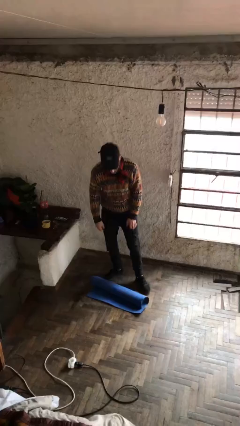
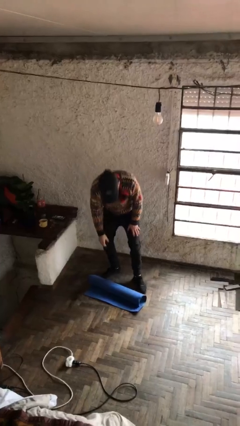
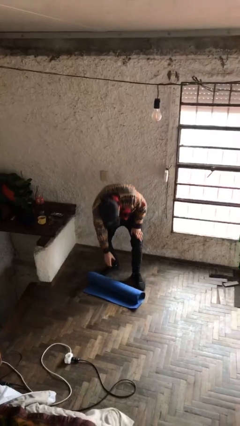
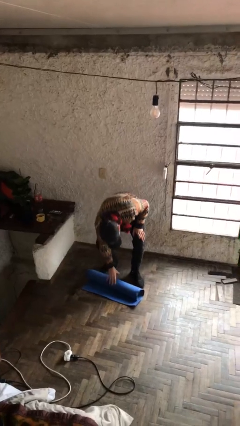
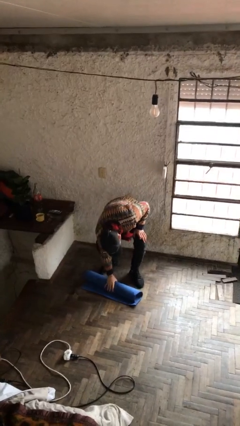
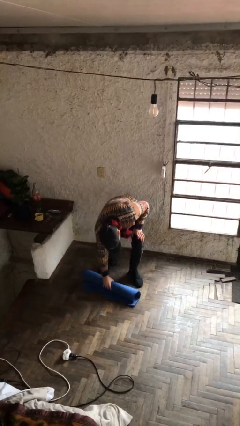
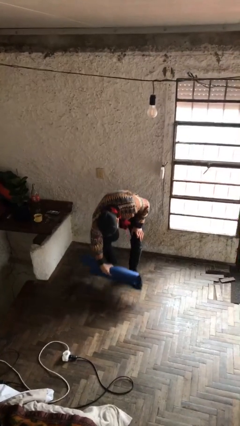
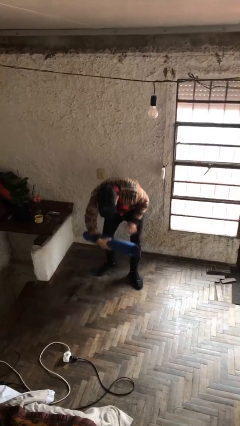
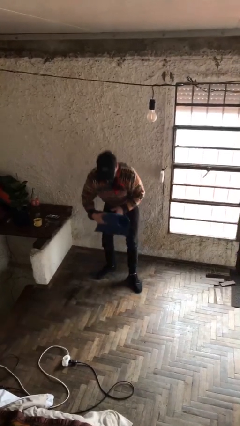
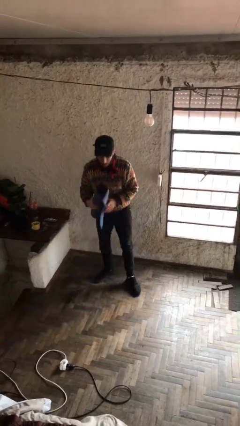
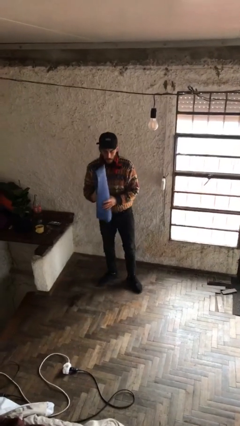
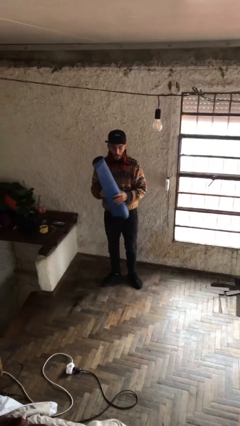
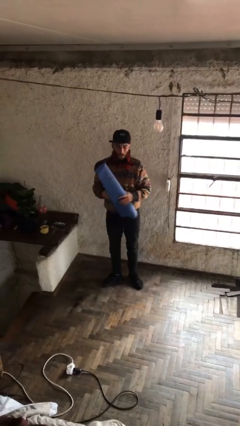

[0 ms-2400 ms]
person picks up object from floor

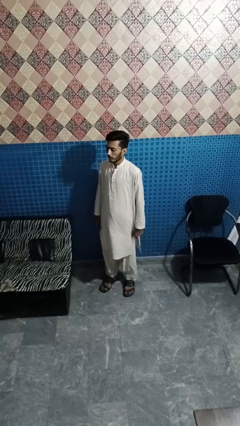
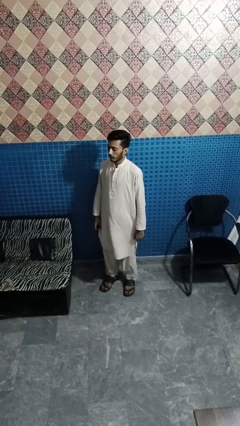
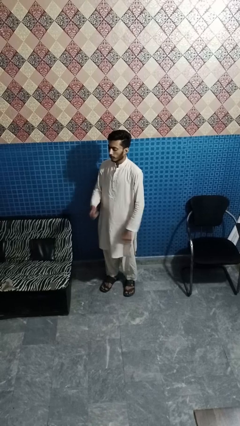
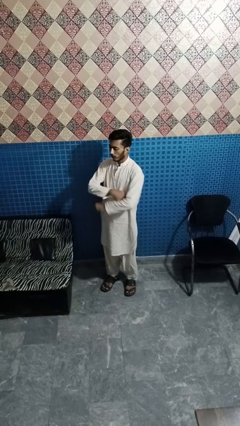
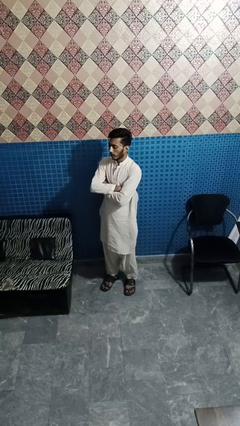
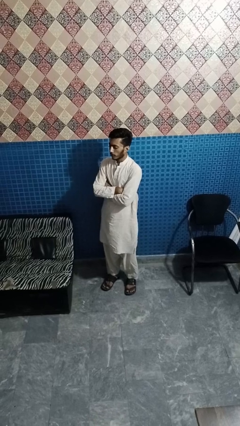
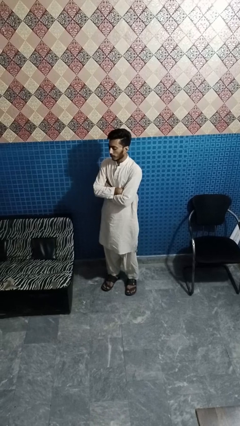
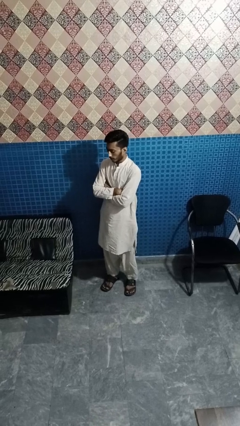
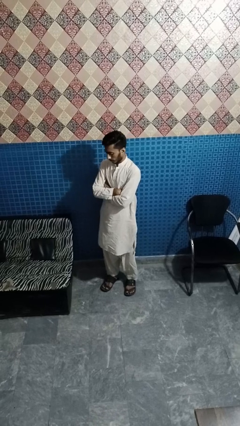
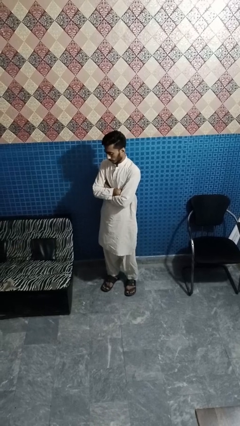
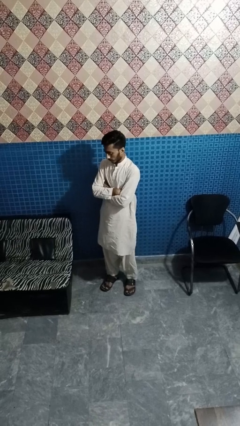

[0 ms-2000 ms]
person crosses arms

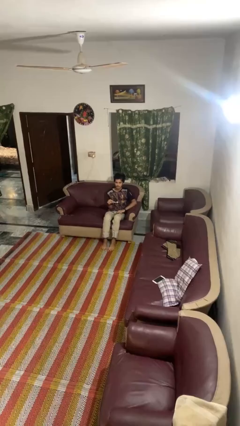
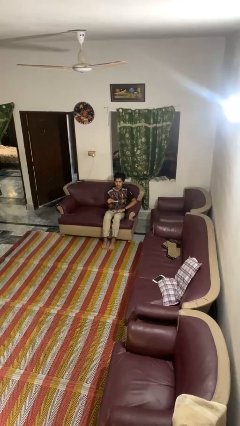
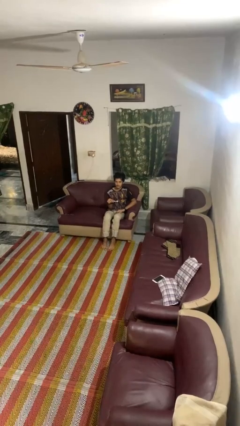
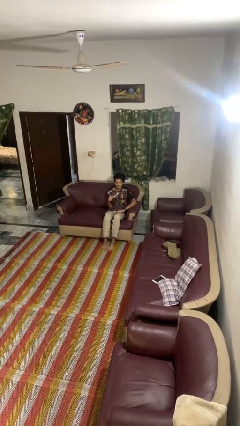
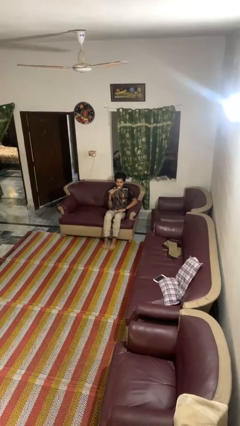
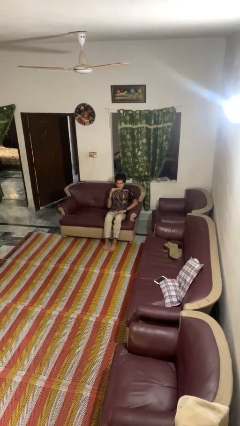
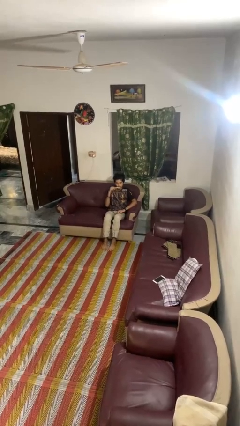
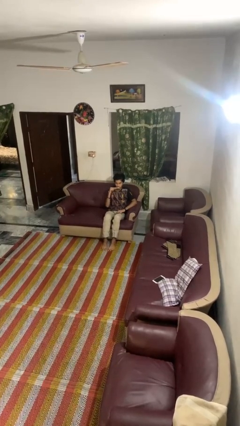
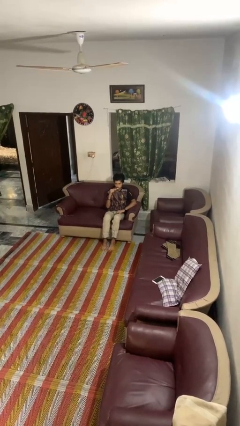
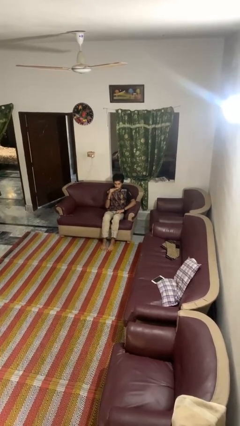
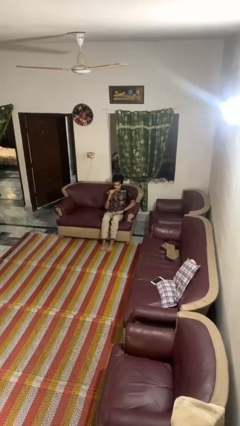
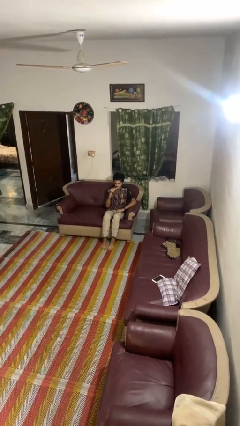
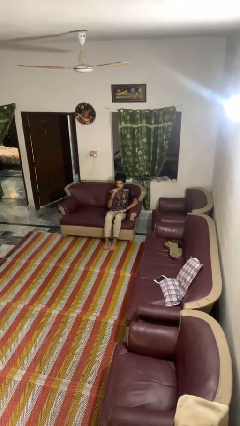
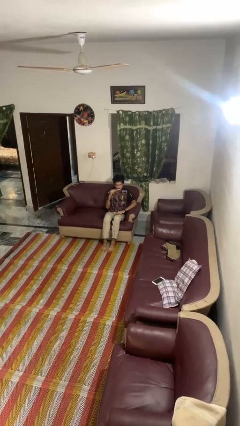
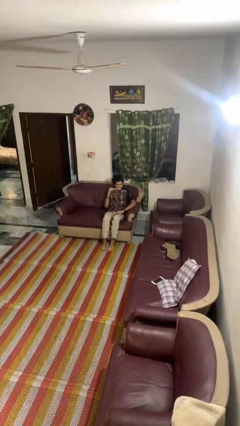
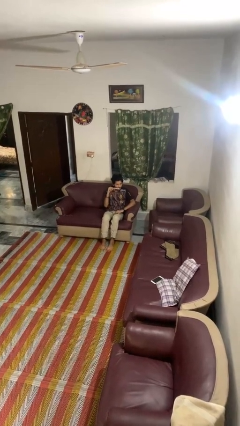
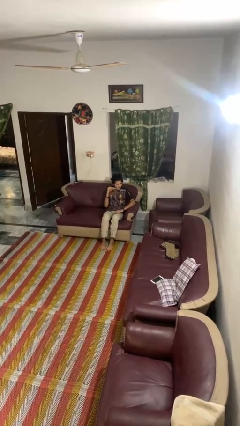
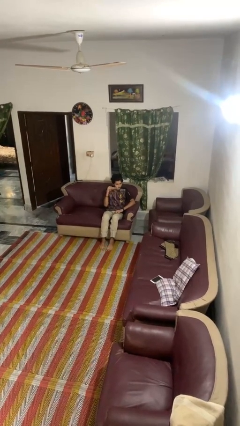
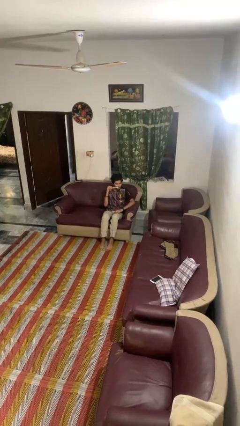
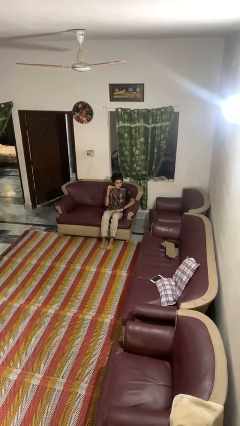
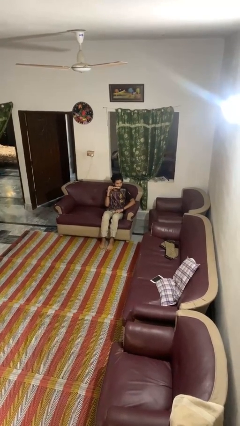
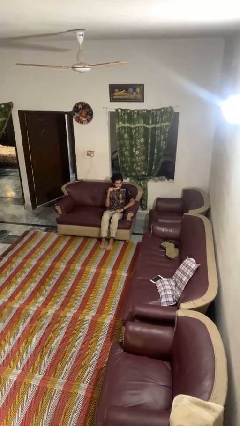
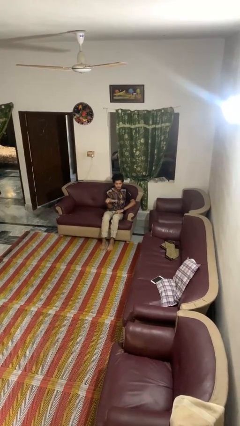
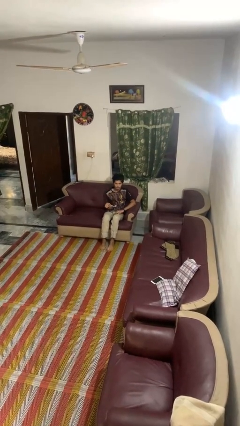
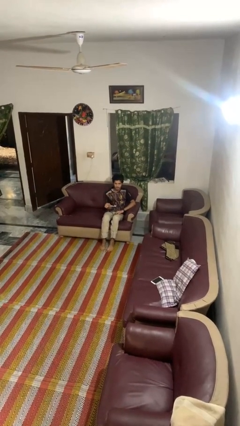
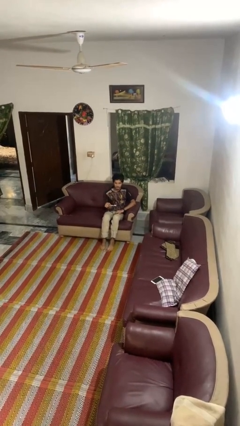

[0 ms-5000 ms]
person brushes teeth

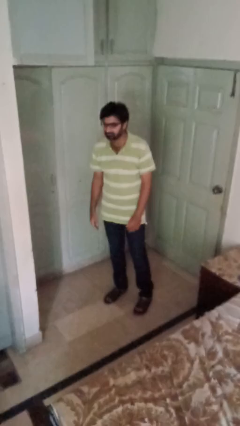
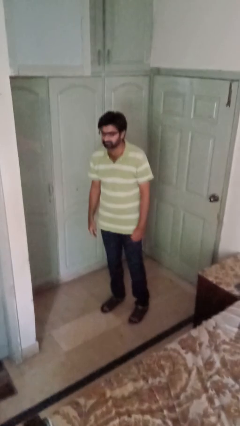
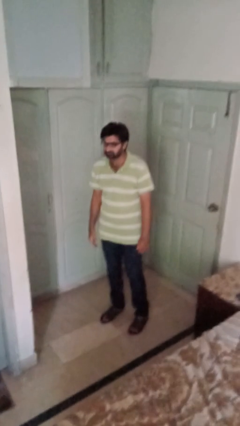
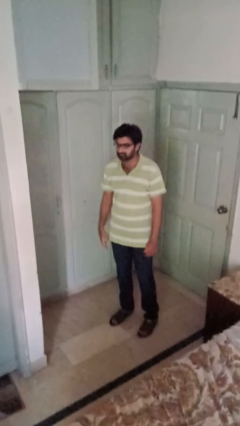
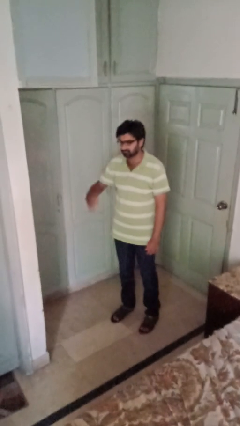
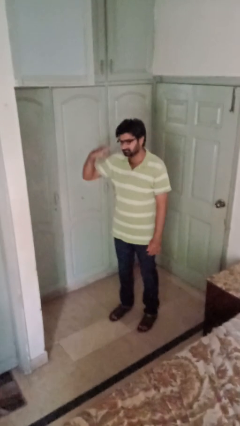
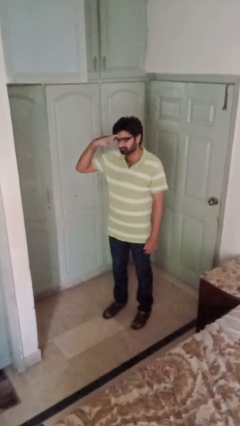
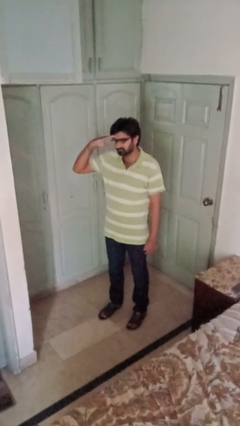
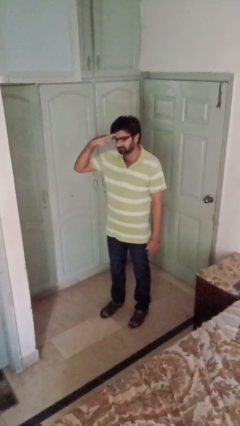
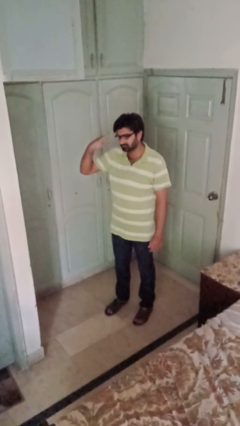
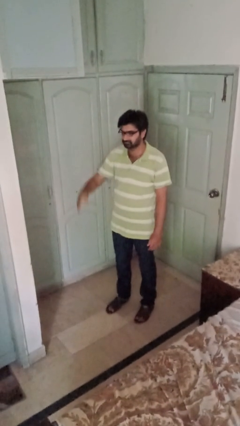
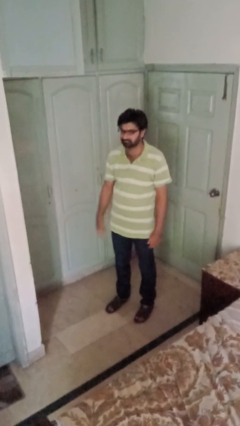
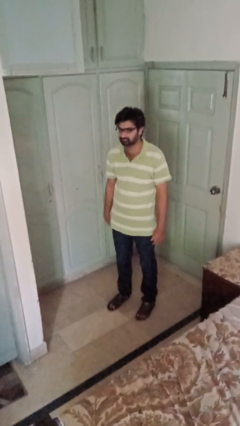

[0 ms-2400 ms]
person salutes

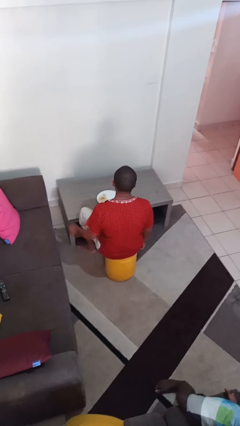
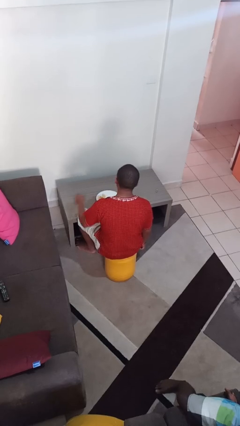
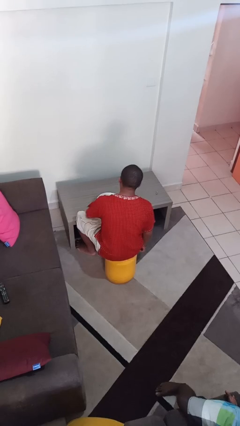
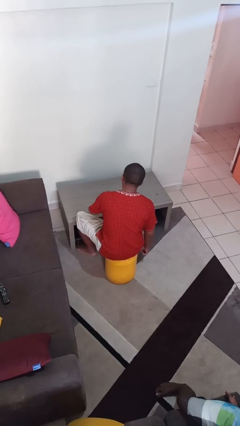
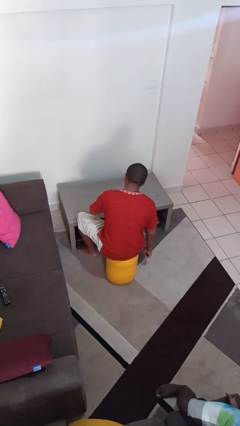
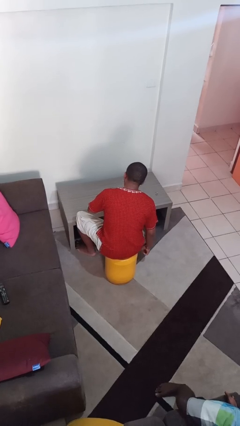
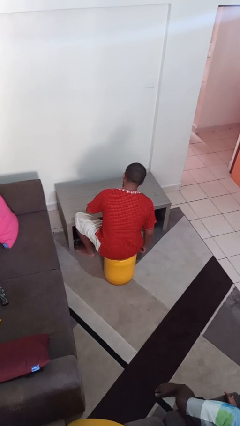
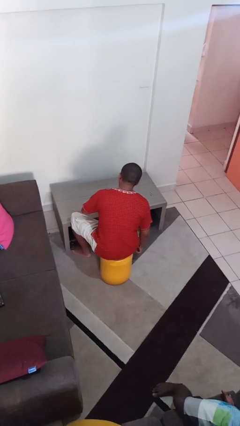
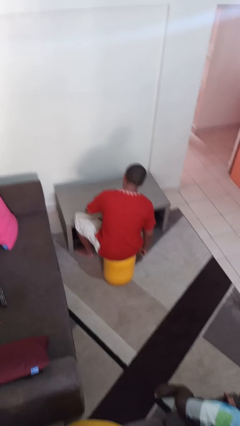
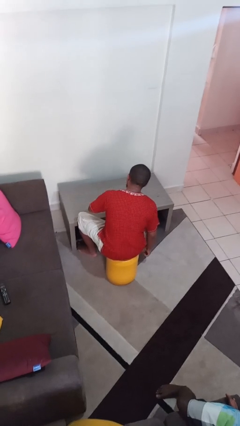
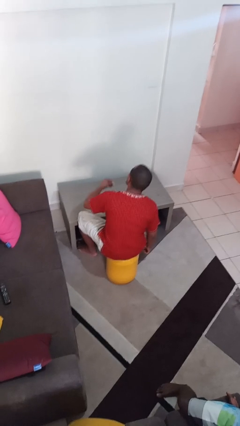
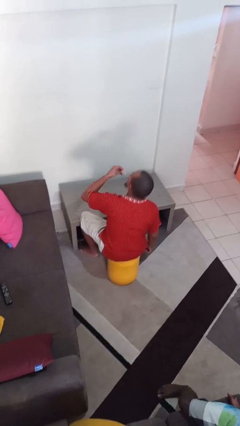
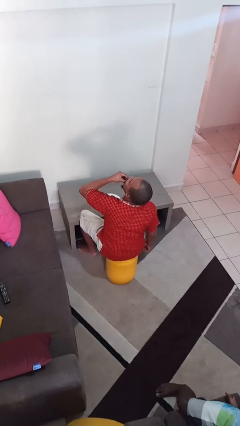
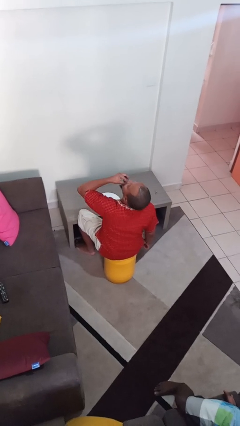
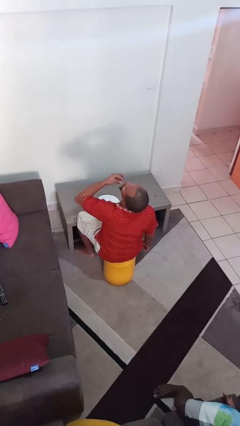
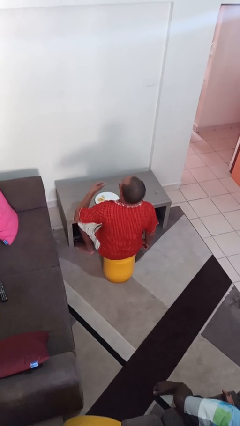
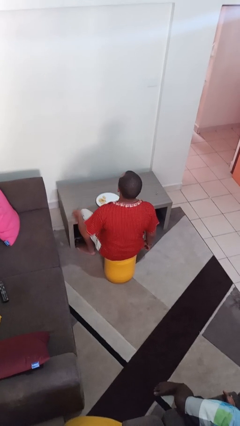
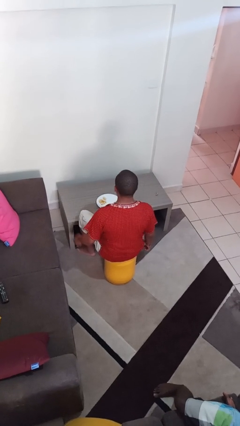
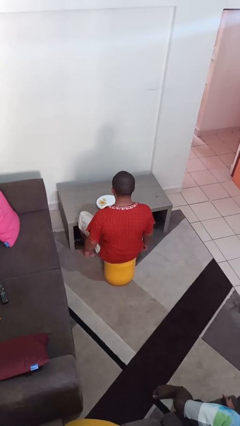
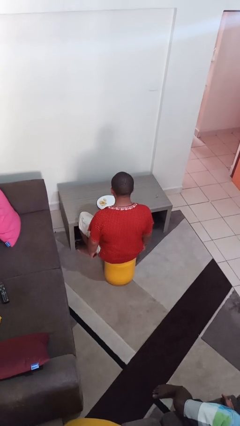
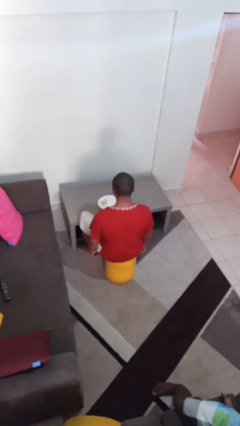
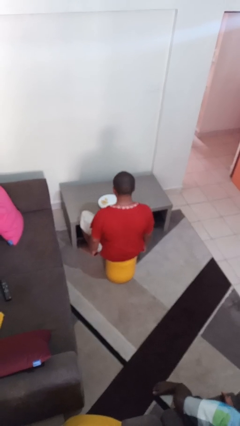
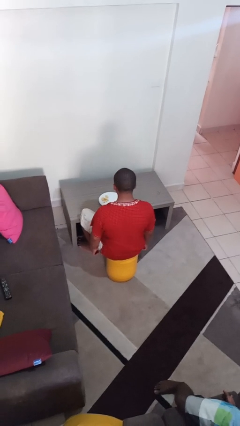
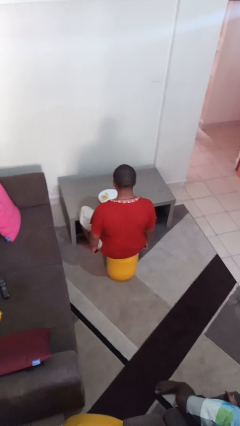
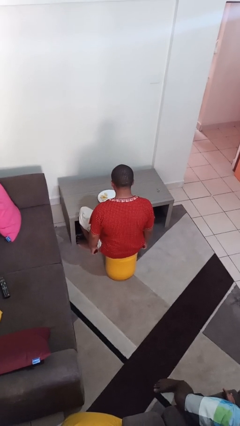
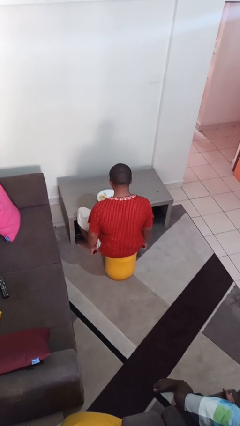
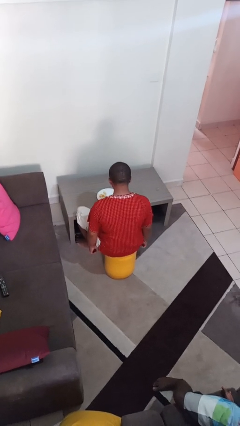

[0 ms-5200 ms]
person eats with hands

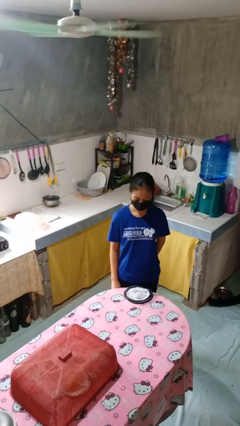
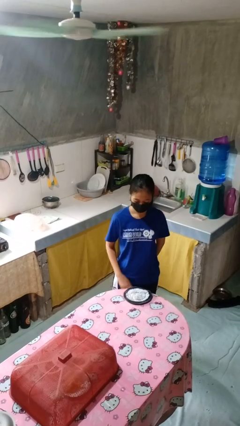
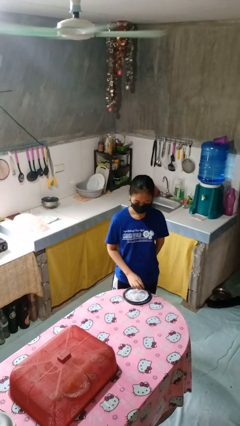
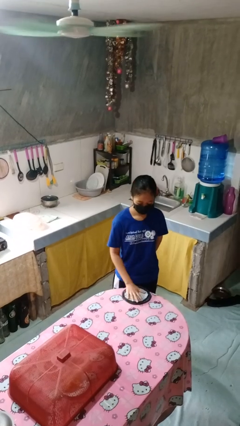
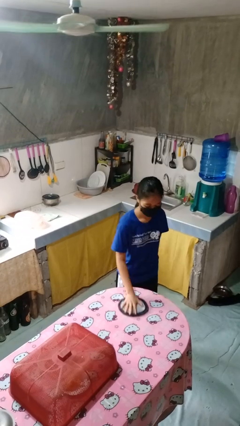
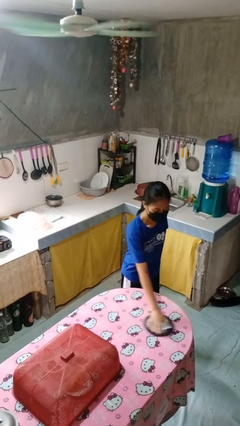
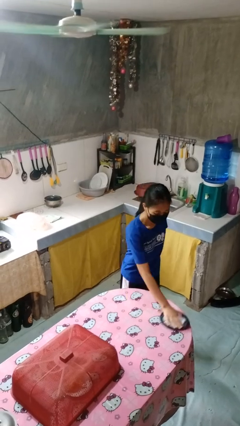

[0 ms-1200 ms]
person cleans table with rag
